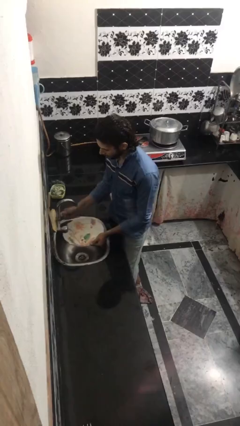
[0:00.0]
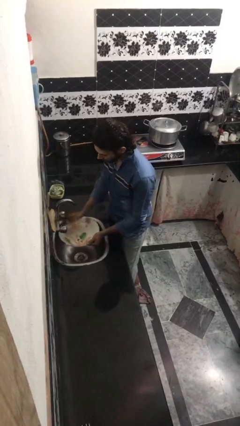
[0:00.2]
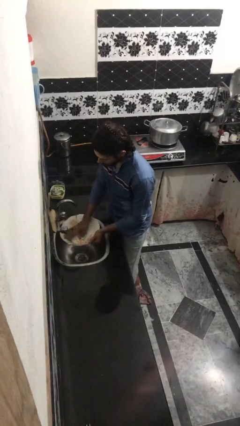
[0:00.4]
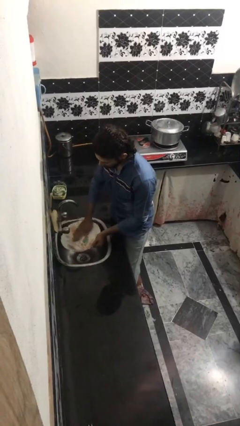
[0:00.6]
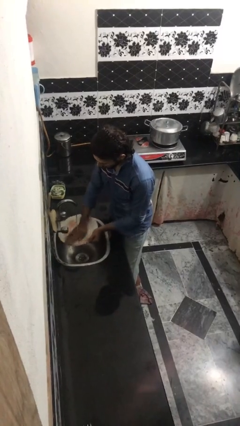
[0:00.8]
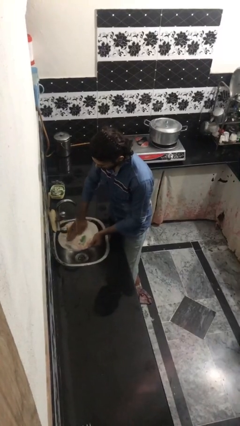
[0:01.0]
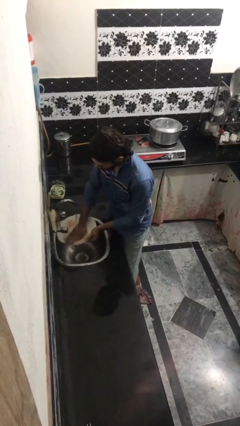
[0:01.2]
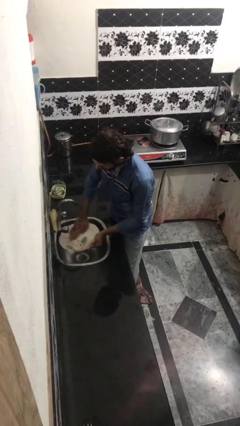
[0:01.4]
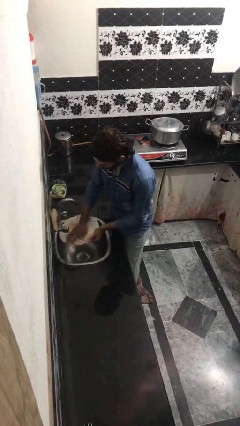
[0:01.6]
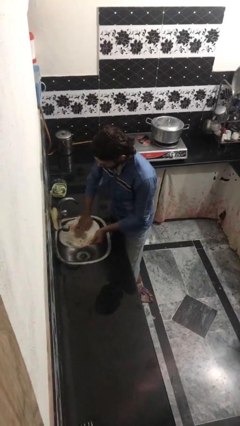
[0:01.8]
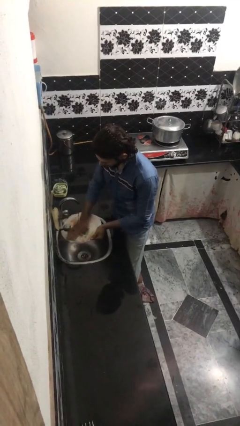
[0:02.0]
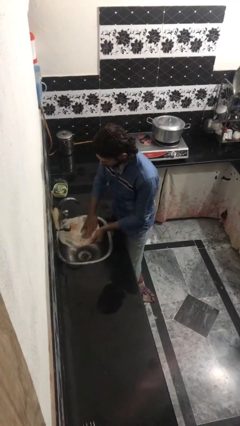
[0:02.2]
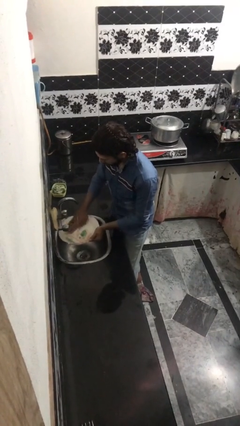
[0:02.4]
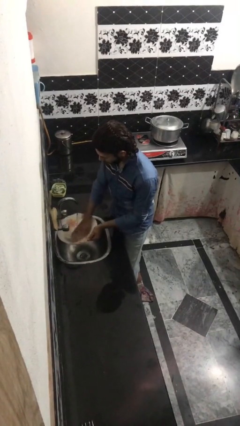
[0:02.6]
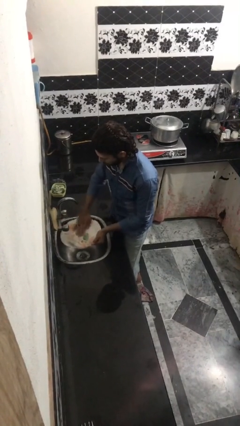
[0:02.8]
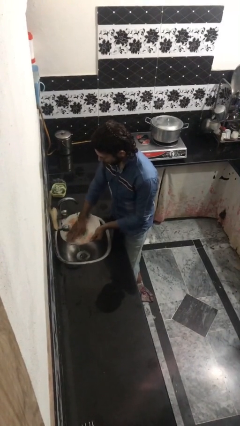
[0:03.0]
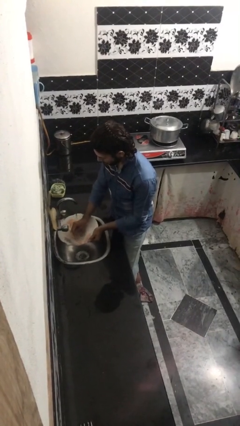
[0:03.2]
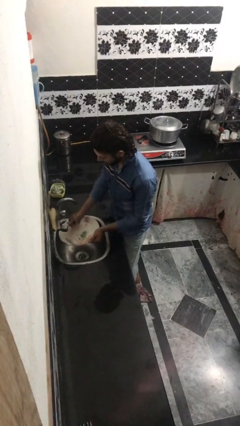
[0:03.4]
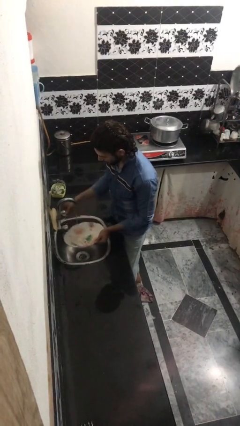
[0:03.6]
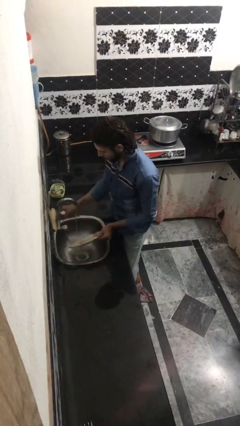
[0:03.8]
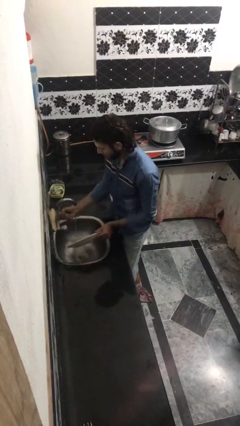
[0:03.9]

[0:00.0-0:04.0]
person washes dish

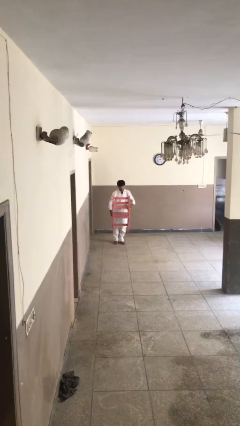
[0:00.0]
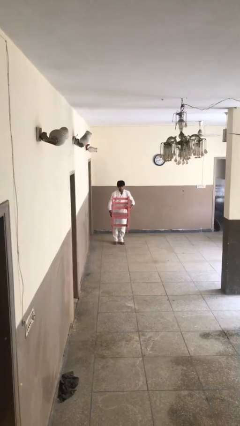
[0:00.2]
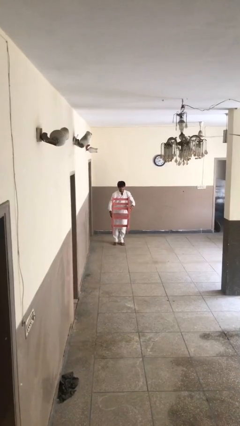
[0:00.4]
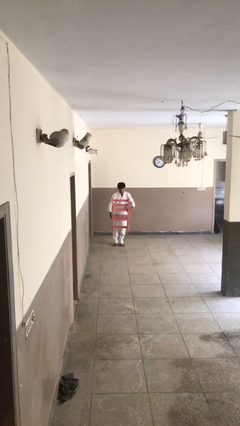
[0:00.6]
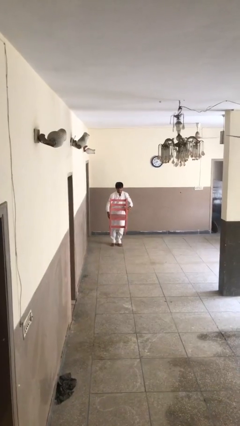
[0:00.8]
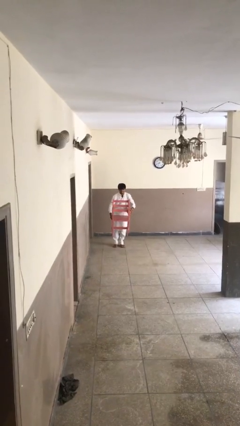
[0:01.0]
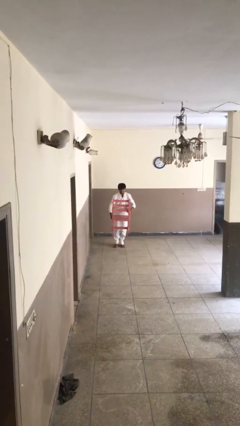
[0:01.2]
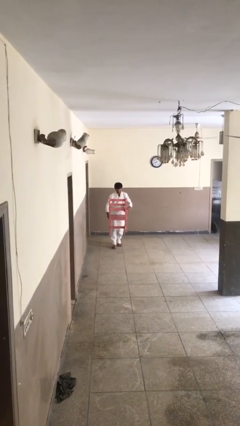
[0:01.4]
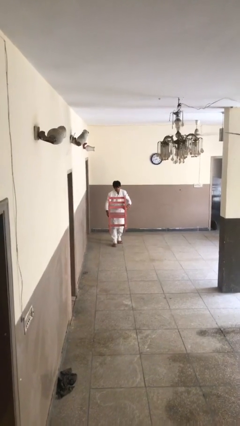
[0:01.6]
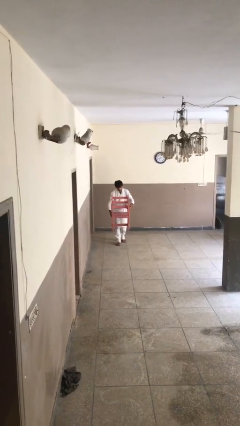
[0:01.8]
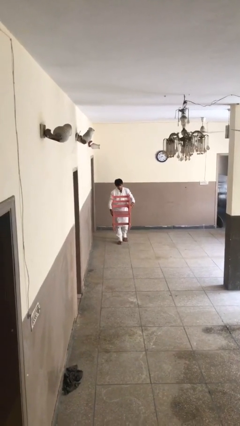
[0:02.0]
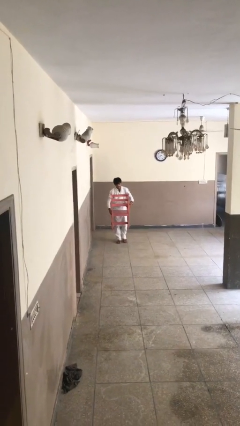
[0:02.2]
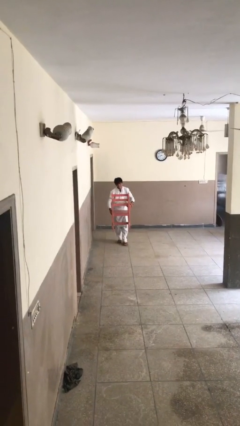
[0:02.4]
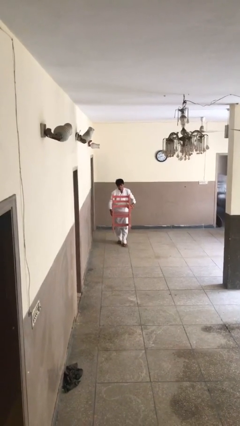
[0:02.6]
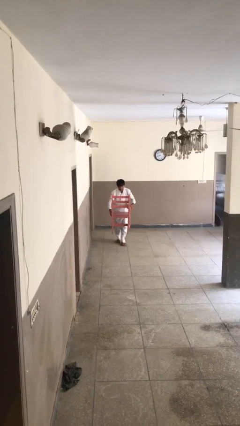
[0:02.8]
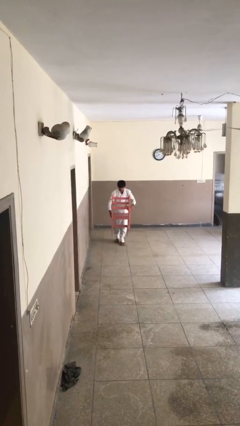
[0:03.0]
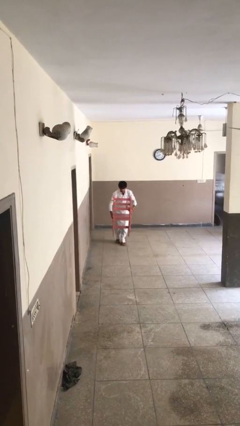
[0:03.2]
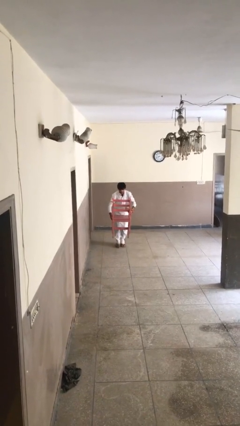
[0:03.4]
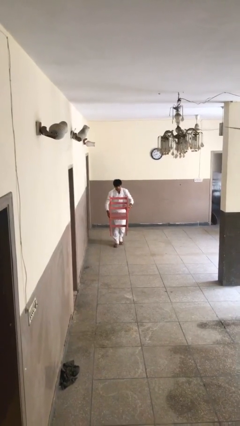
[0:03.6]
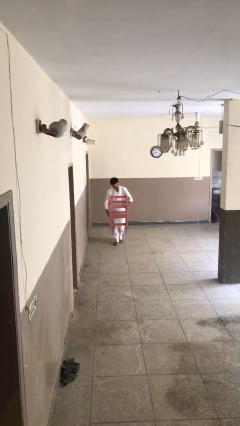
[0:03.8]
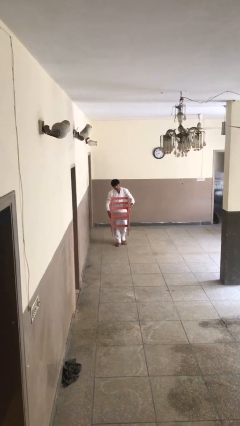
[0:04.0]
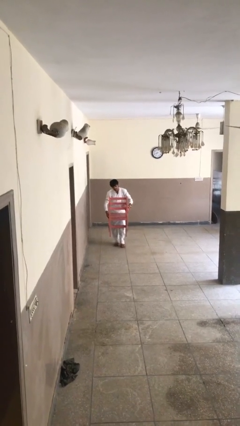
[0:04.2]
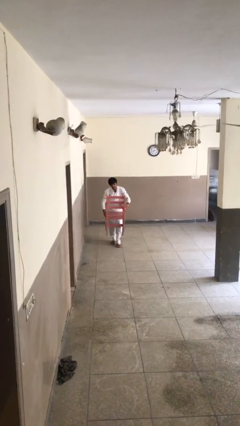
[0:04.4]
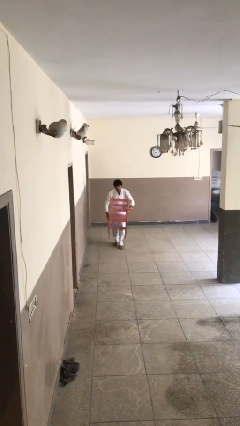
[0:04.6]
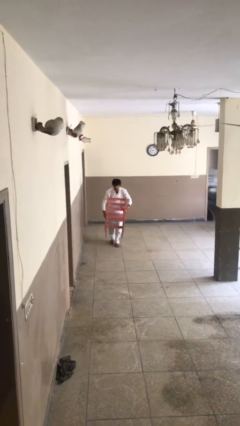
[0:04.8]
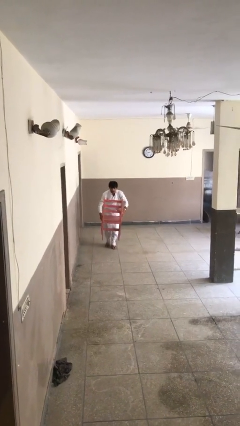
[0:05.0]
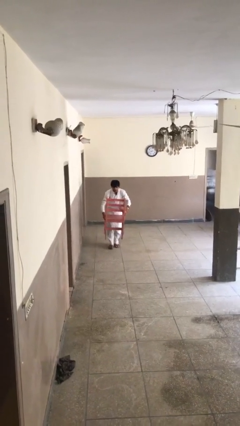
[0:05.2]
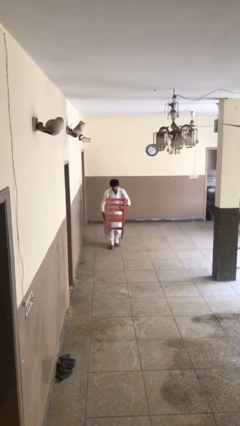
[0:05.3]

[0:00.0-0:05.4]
person carries heavy object

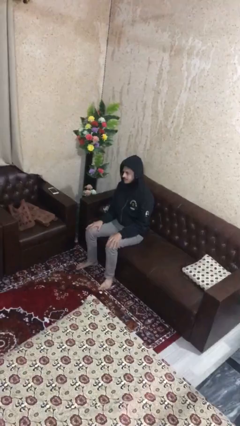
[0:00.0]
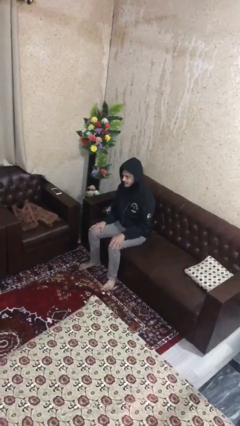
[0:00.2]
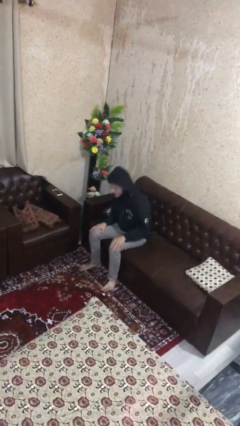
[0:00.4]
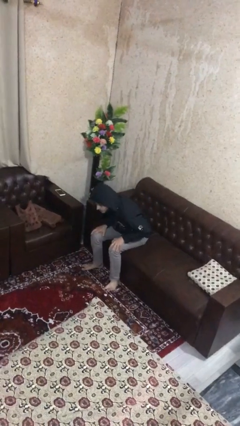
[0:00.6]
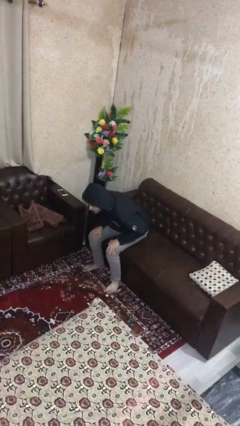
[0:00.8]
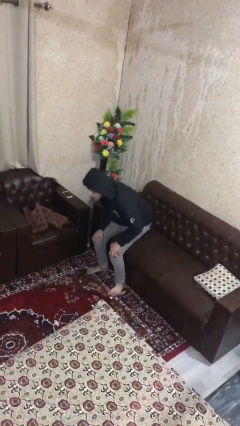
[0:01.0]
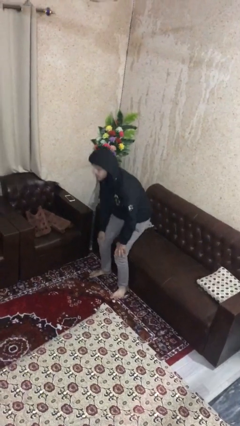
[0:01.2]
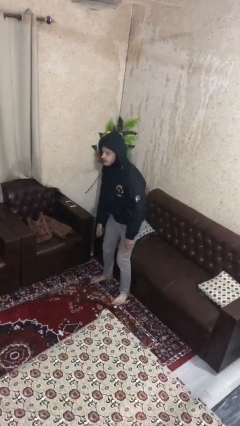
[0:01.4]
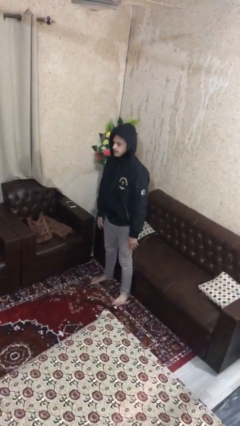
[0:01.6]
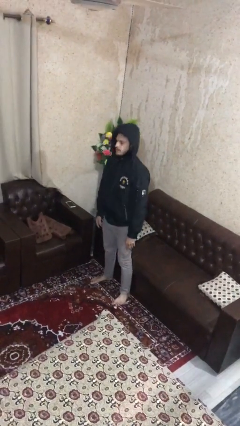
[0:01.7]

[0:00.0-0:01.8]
person stands up

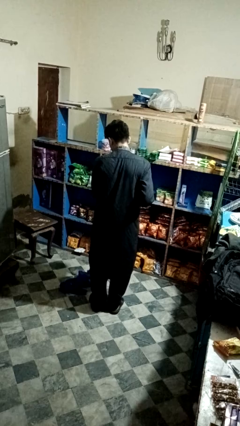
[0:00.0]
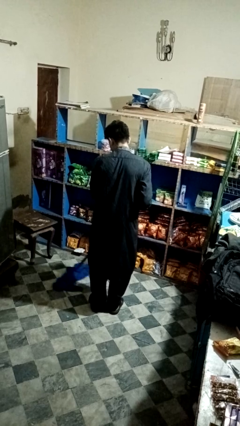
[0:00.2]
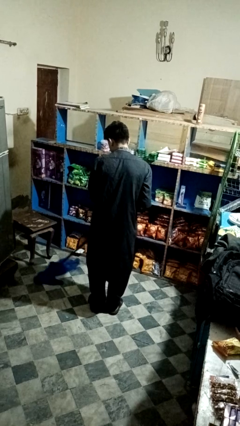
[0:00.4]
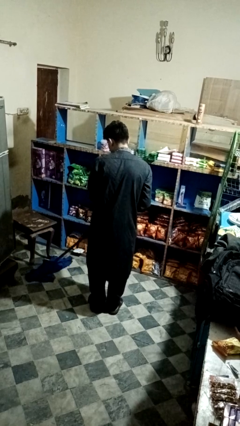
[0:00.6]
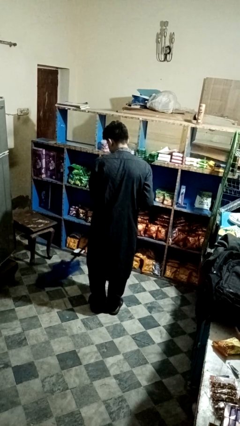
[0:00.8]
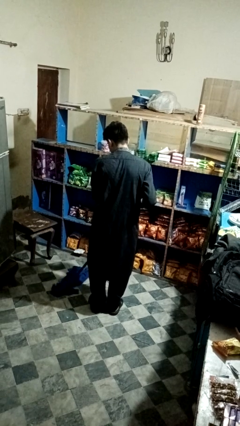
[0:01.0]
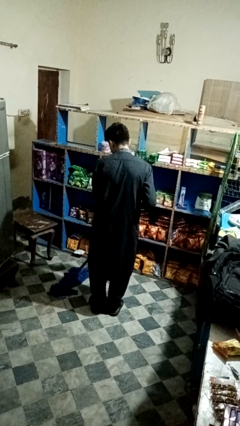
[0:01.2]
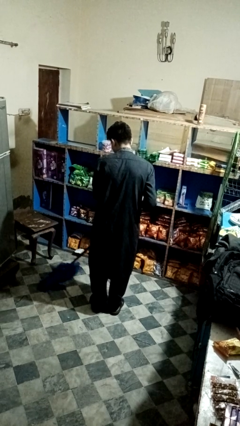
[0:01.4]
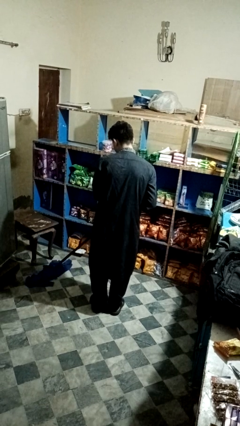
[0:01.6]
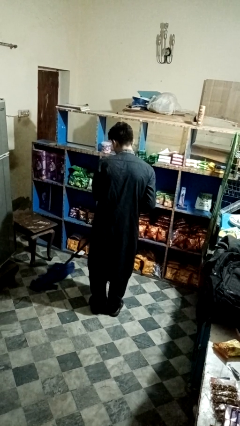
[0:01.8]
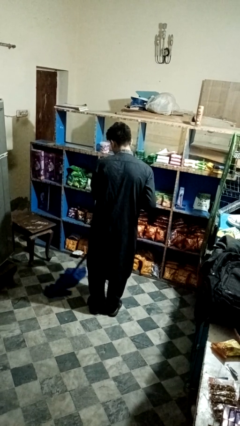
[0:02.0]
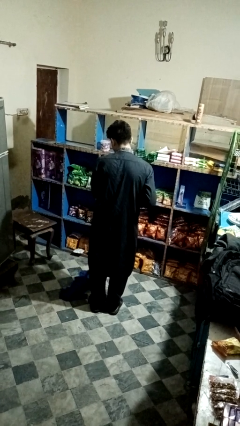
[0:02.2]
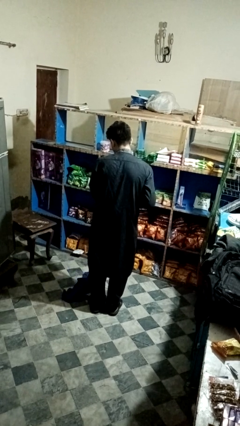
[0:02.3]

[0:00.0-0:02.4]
person mops

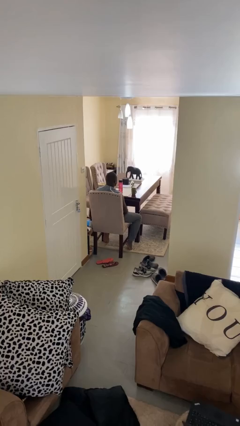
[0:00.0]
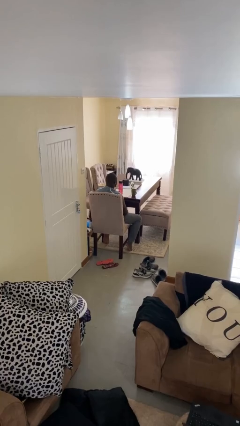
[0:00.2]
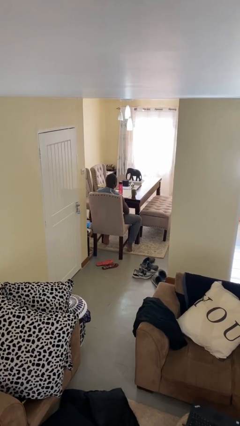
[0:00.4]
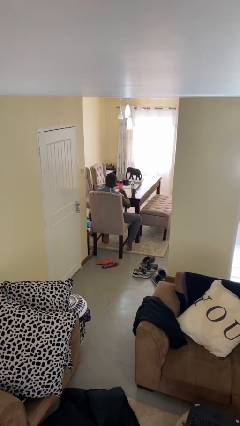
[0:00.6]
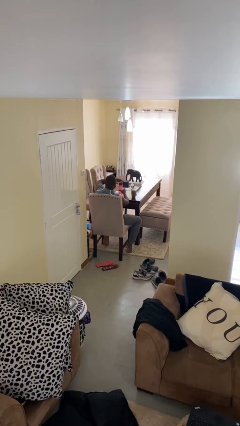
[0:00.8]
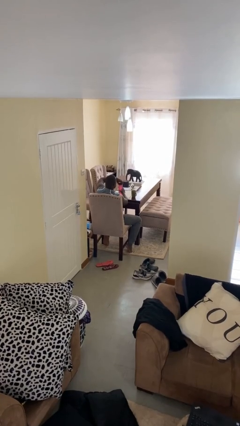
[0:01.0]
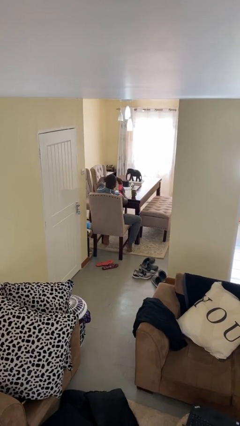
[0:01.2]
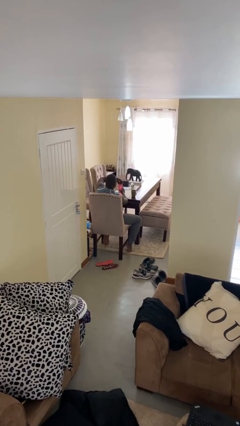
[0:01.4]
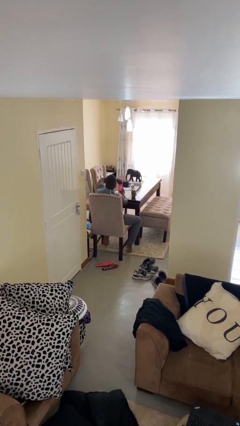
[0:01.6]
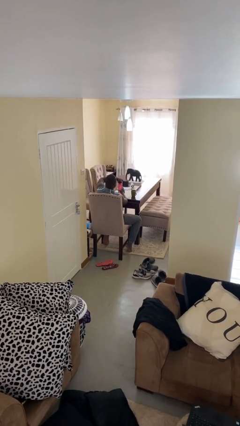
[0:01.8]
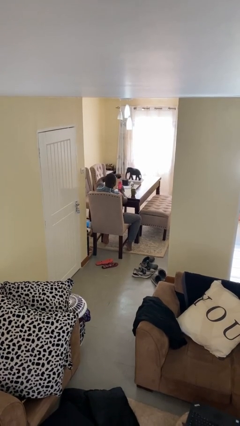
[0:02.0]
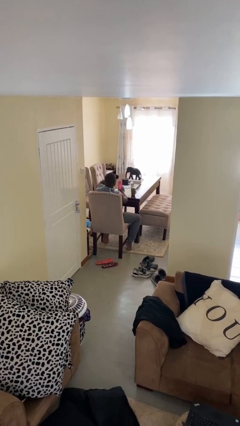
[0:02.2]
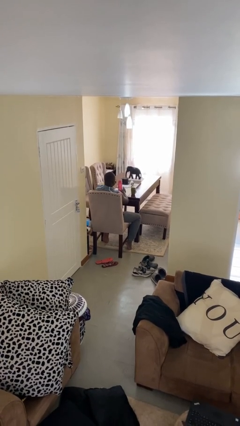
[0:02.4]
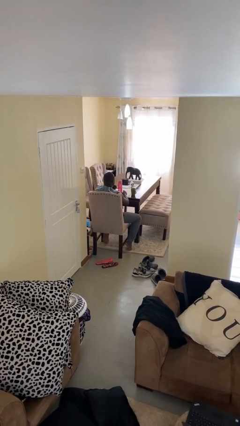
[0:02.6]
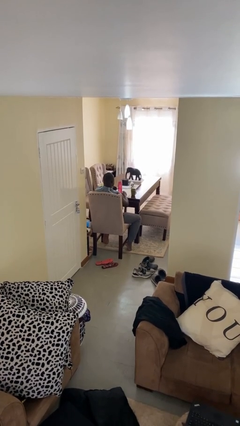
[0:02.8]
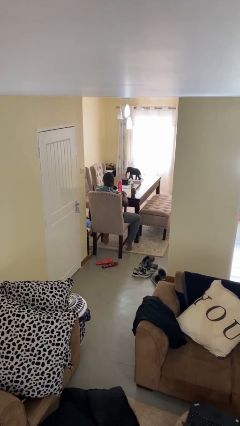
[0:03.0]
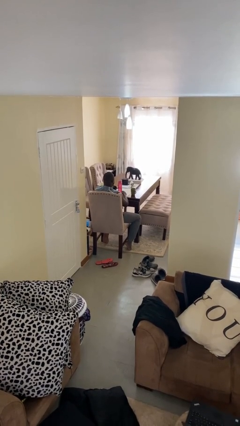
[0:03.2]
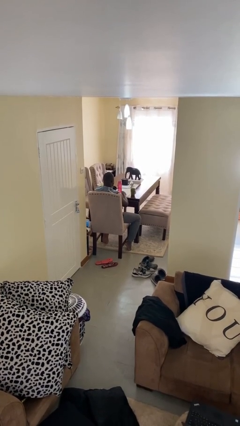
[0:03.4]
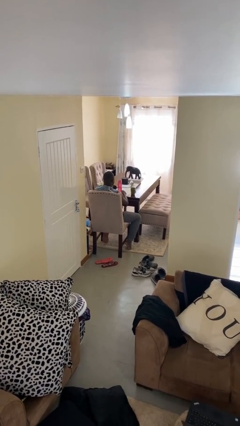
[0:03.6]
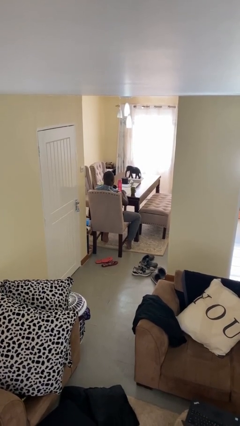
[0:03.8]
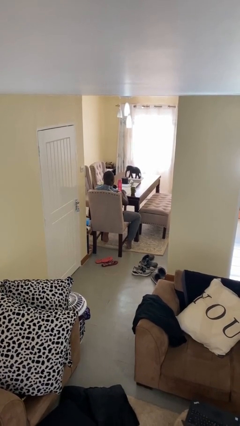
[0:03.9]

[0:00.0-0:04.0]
person unscrews lid from bottle

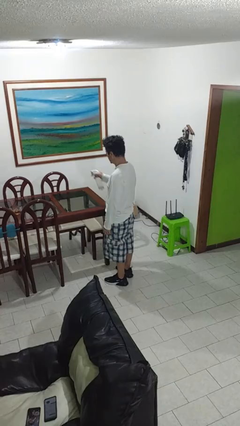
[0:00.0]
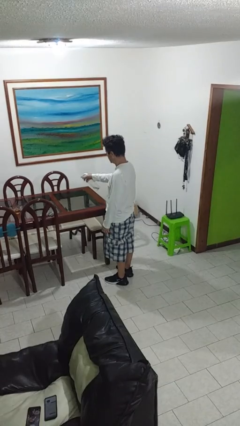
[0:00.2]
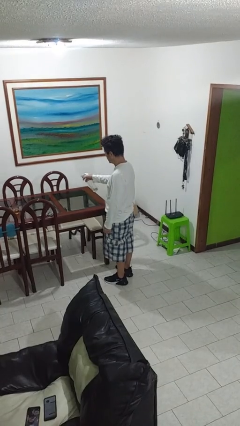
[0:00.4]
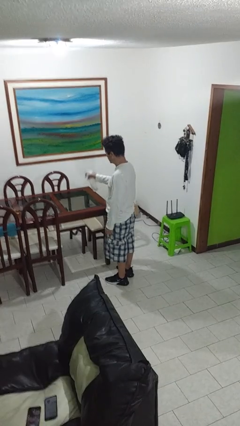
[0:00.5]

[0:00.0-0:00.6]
person sprays from bottle
